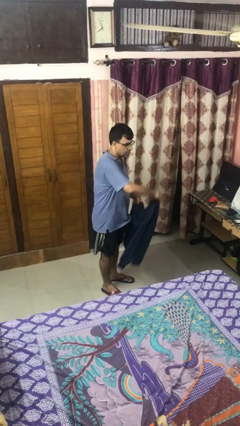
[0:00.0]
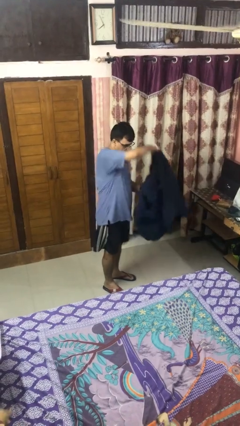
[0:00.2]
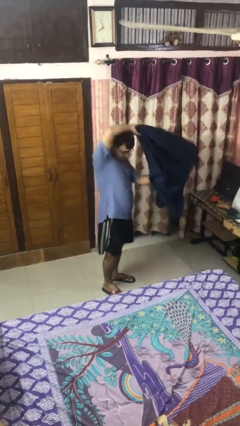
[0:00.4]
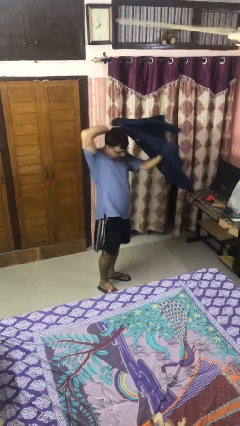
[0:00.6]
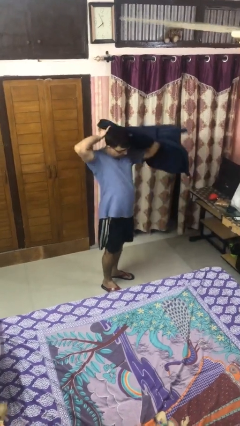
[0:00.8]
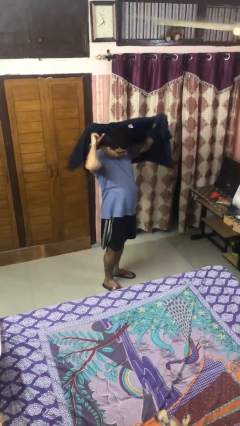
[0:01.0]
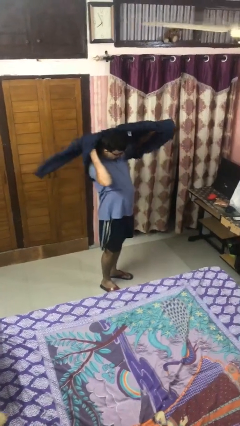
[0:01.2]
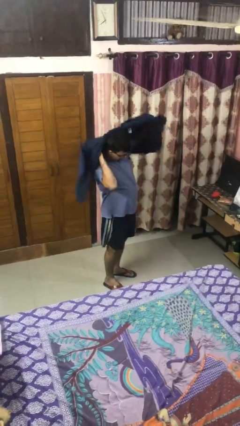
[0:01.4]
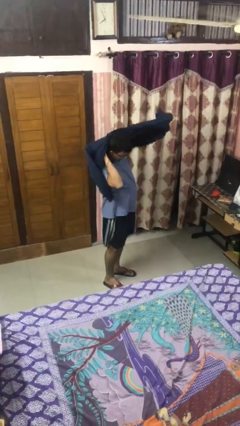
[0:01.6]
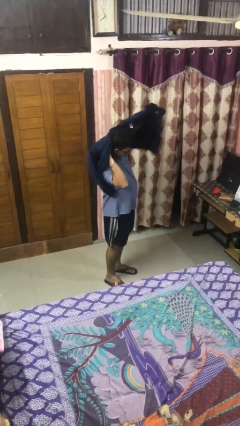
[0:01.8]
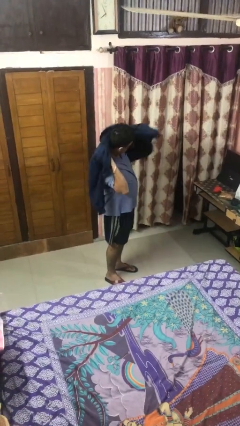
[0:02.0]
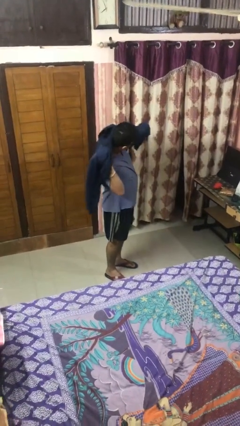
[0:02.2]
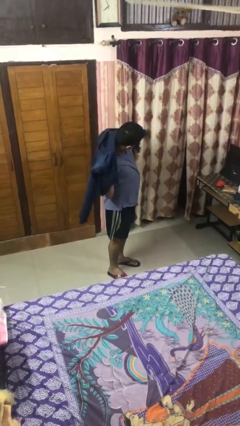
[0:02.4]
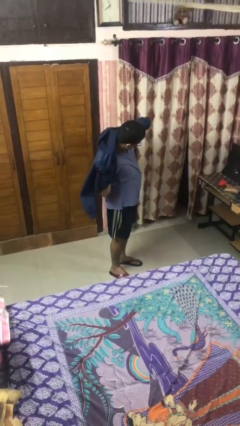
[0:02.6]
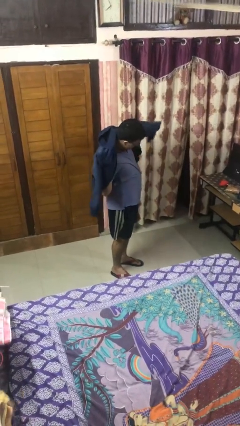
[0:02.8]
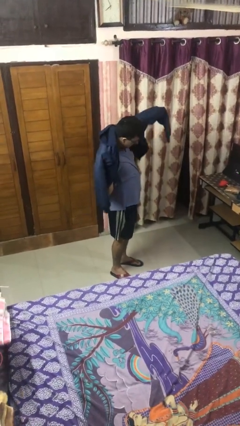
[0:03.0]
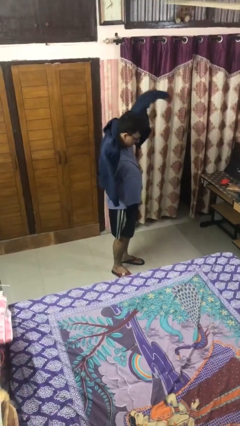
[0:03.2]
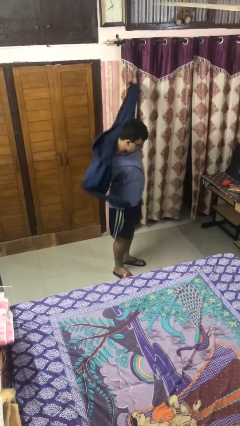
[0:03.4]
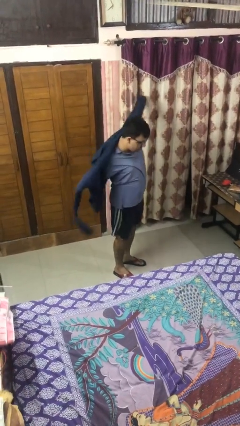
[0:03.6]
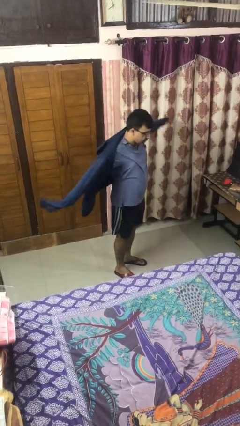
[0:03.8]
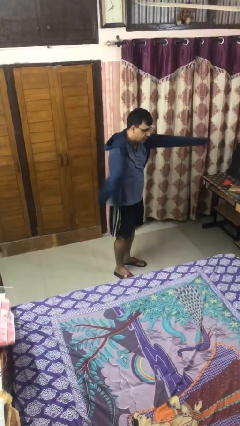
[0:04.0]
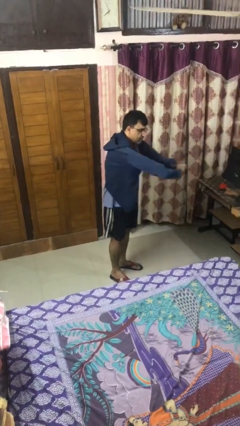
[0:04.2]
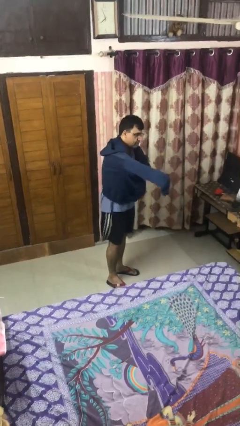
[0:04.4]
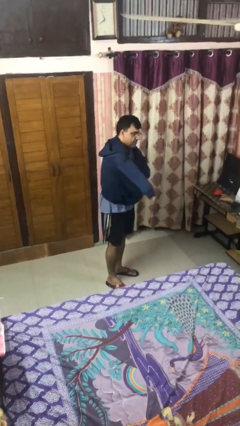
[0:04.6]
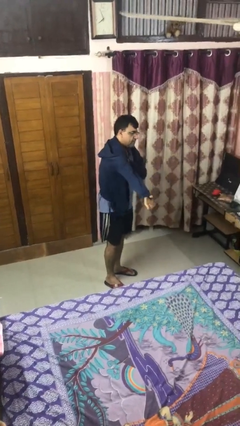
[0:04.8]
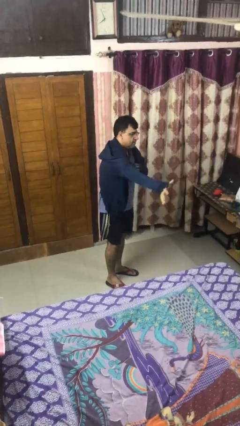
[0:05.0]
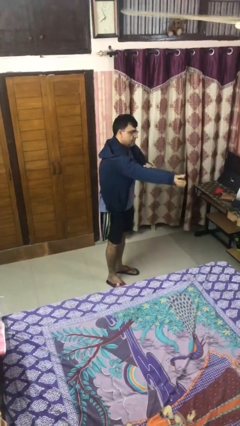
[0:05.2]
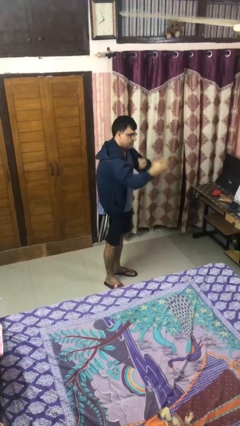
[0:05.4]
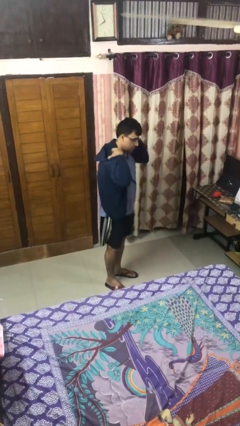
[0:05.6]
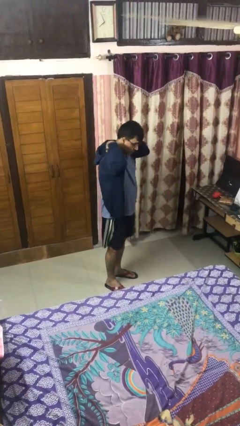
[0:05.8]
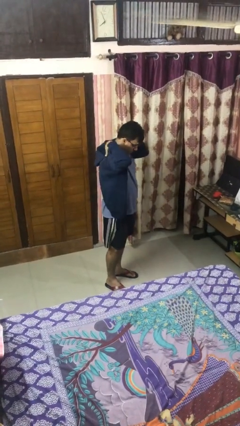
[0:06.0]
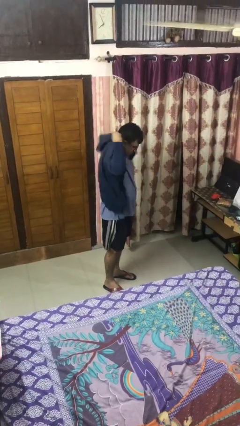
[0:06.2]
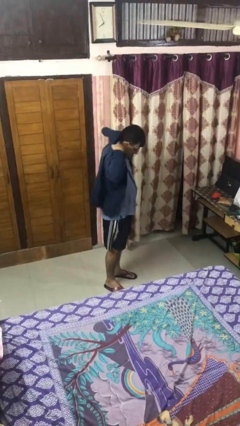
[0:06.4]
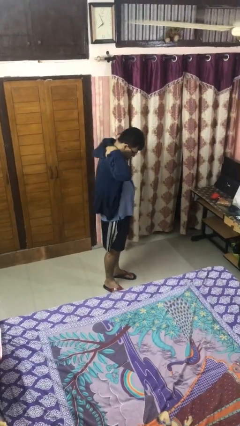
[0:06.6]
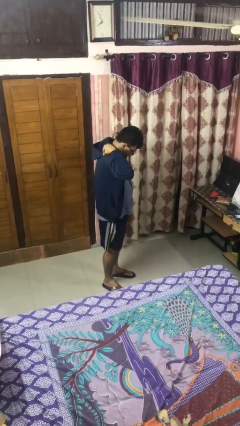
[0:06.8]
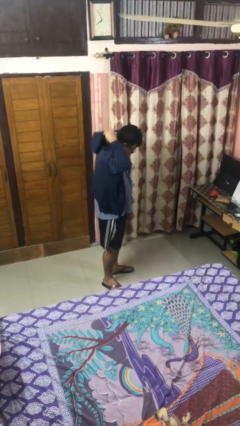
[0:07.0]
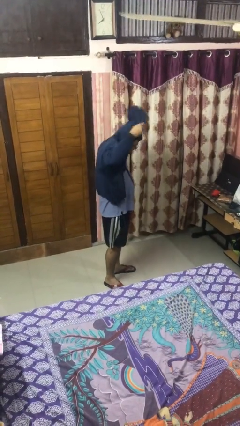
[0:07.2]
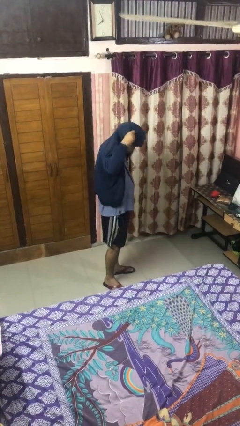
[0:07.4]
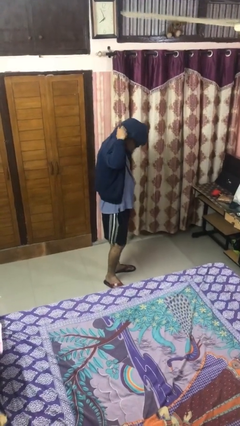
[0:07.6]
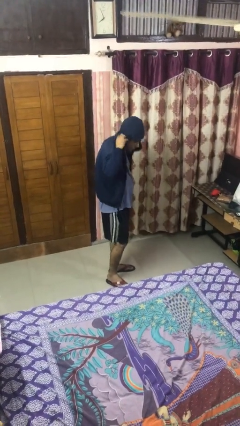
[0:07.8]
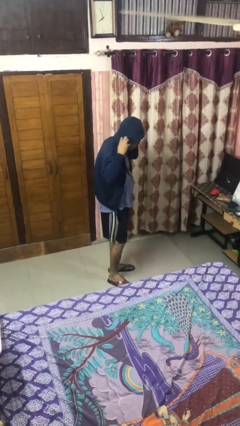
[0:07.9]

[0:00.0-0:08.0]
person puts on hoodie

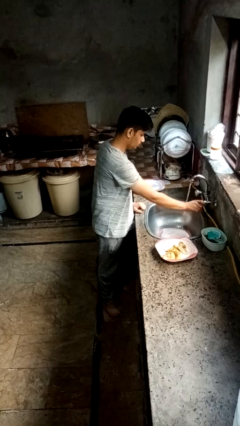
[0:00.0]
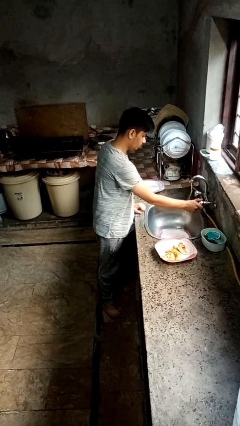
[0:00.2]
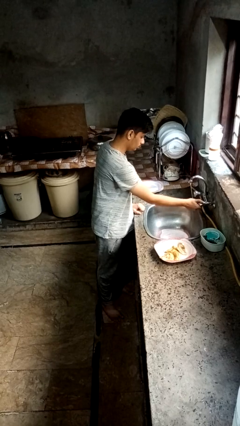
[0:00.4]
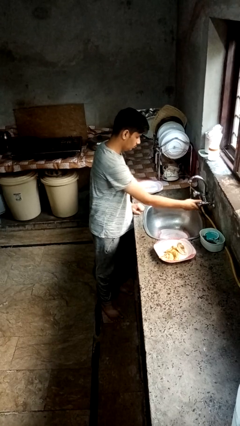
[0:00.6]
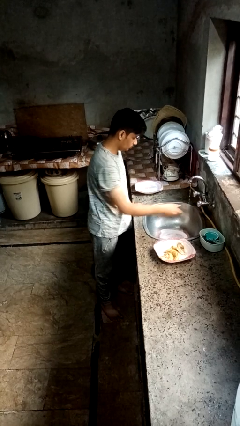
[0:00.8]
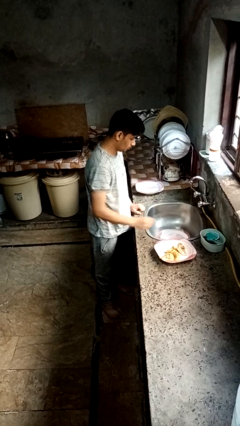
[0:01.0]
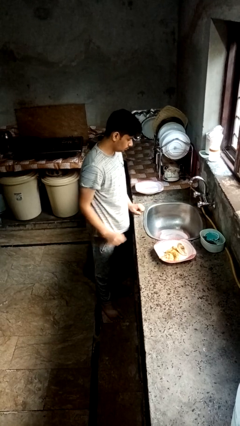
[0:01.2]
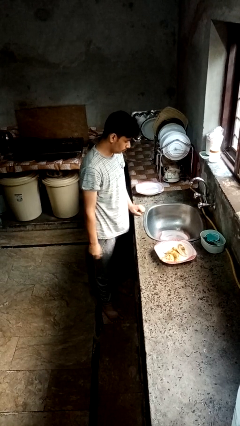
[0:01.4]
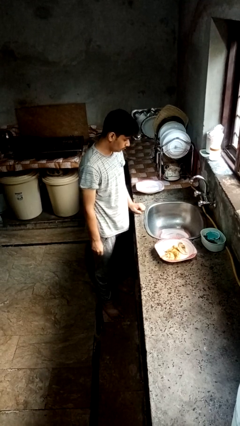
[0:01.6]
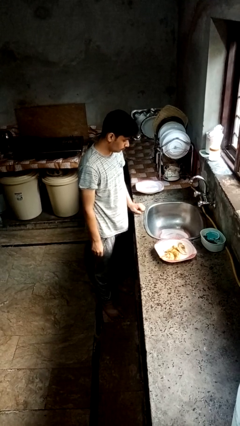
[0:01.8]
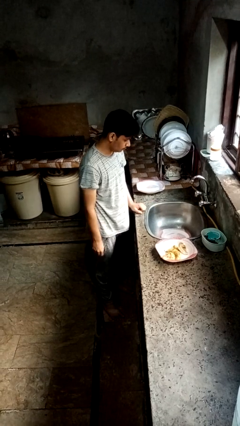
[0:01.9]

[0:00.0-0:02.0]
person closes dishwasher

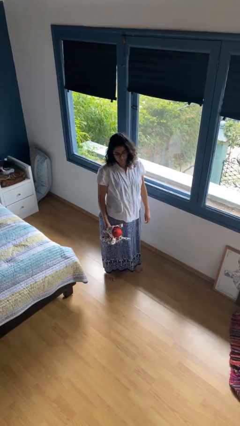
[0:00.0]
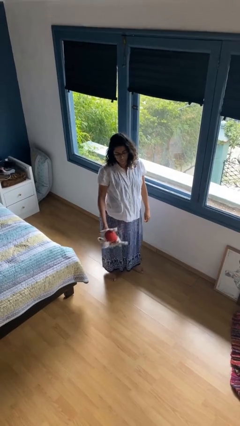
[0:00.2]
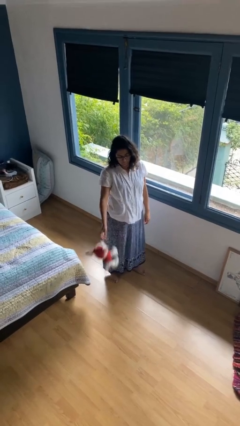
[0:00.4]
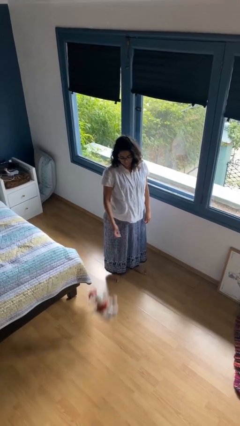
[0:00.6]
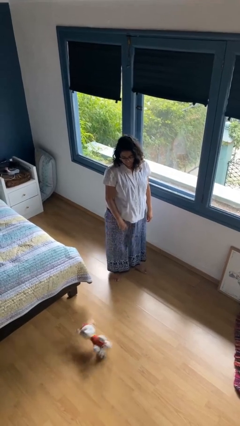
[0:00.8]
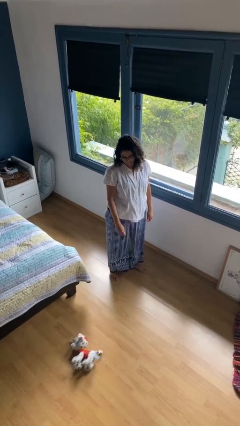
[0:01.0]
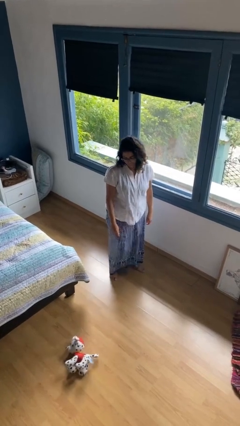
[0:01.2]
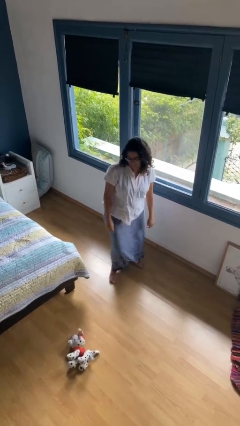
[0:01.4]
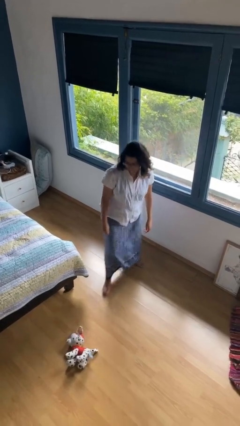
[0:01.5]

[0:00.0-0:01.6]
person throws object to ground

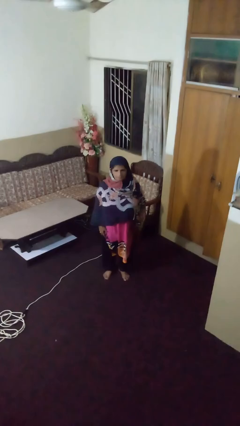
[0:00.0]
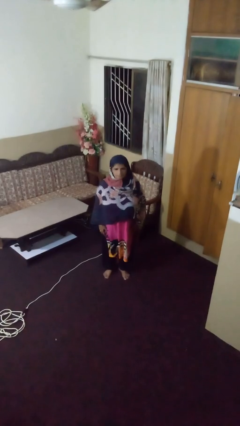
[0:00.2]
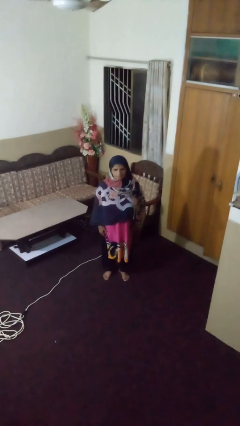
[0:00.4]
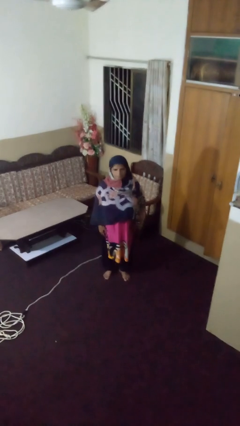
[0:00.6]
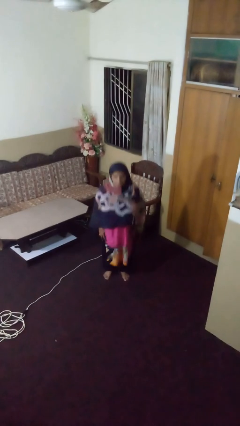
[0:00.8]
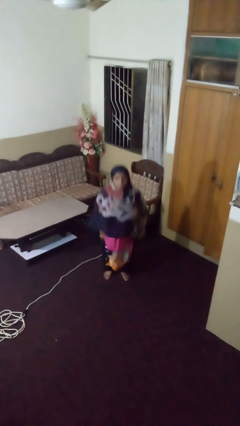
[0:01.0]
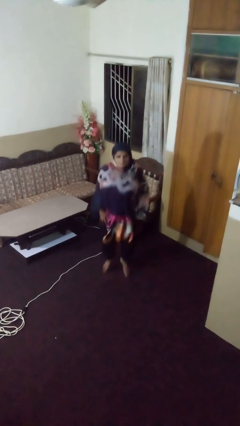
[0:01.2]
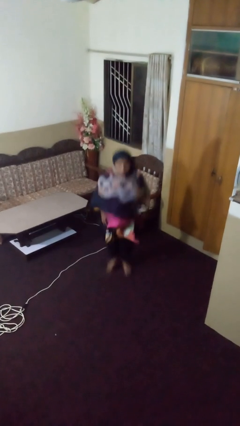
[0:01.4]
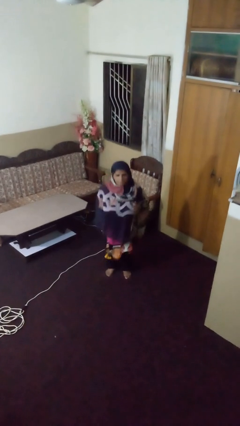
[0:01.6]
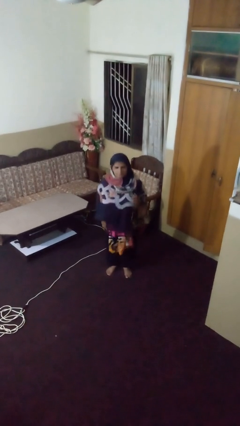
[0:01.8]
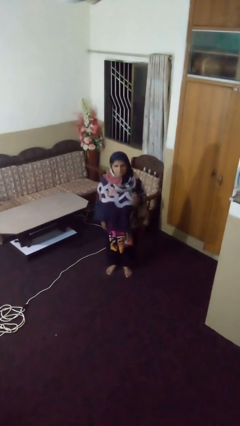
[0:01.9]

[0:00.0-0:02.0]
person jumps

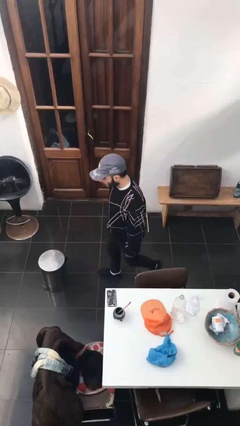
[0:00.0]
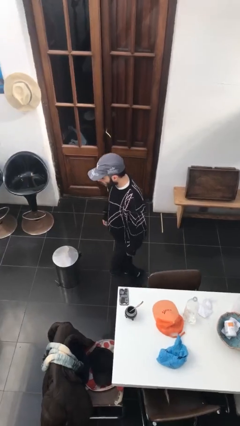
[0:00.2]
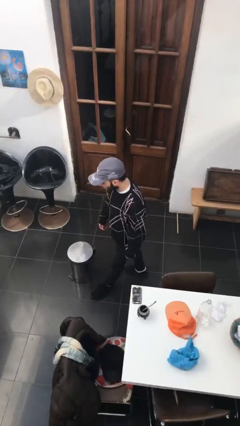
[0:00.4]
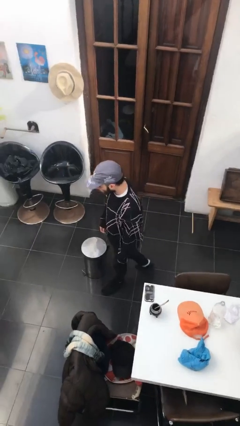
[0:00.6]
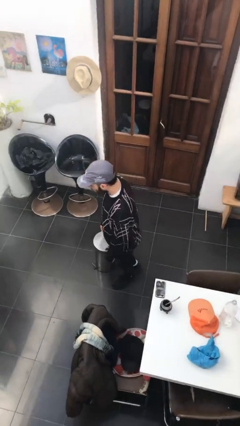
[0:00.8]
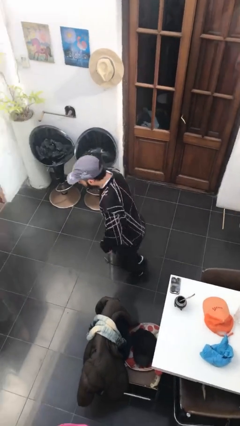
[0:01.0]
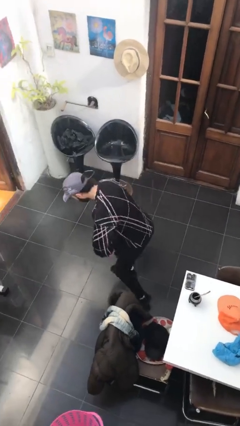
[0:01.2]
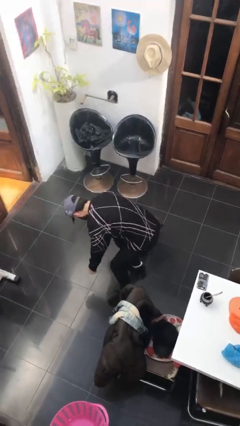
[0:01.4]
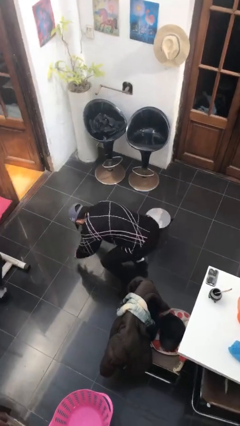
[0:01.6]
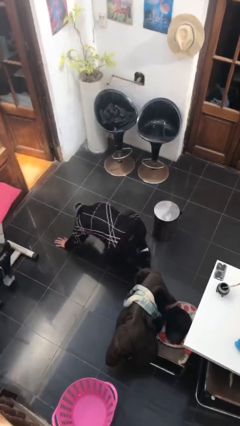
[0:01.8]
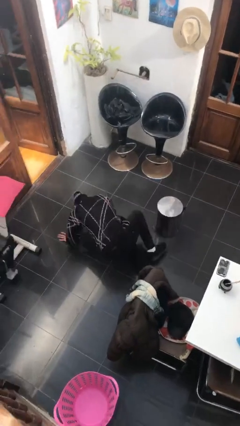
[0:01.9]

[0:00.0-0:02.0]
person trips on object on floor

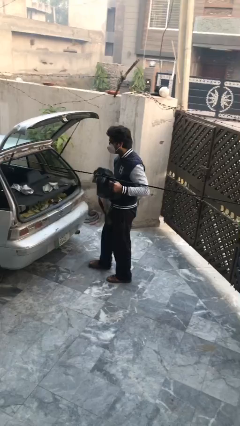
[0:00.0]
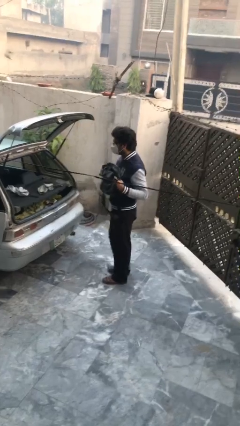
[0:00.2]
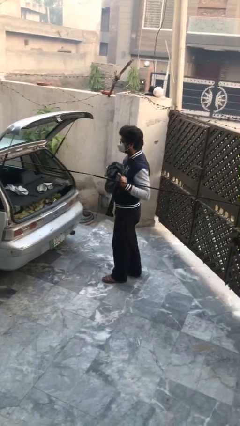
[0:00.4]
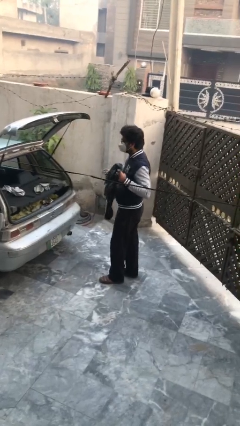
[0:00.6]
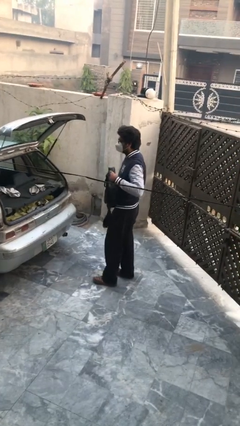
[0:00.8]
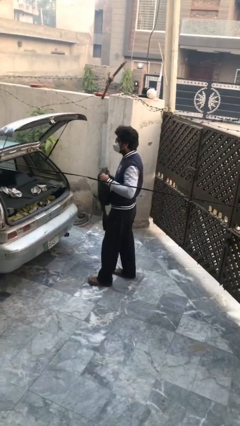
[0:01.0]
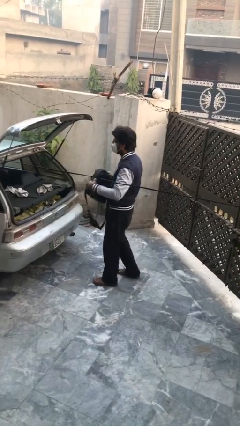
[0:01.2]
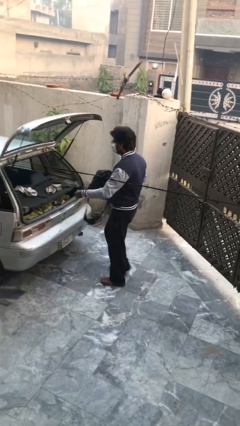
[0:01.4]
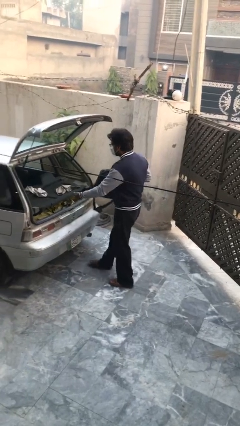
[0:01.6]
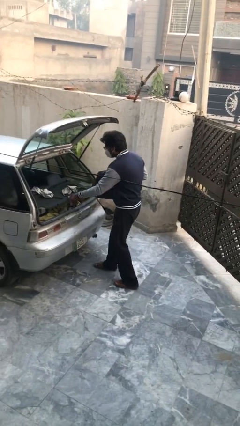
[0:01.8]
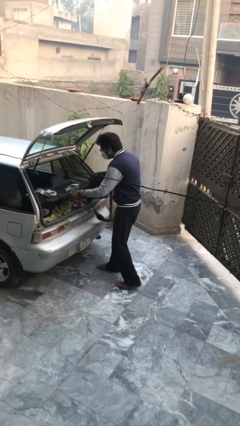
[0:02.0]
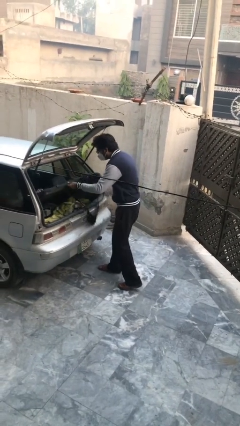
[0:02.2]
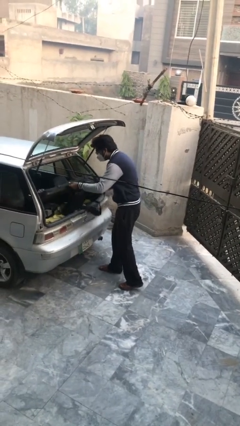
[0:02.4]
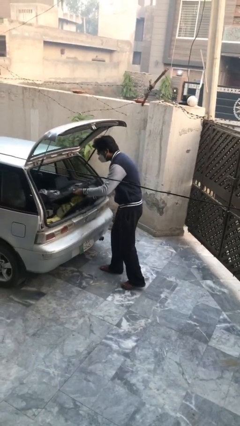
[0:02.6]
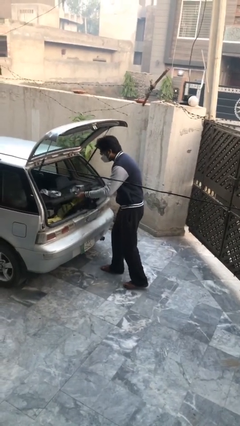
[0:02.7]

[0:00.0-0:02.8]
person loads car
